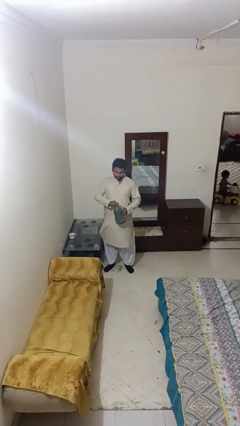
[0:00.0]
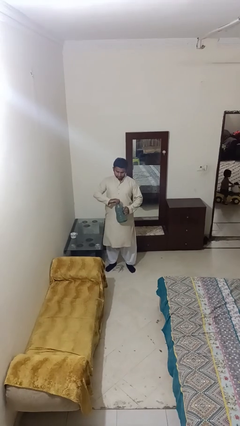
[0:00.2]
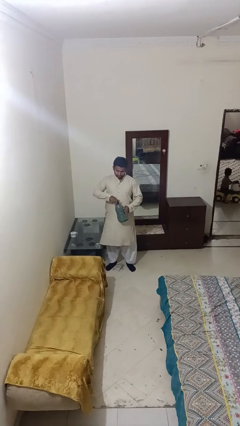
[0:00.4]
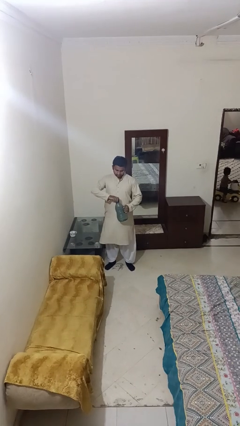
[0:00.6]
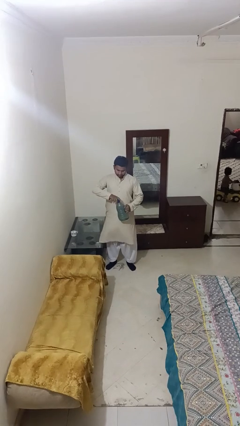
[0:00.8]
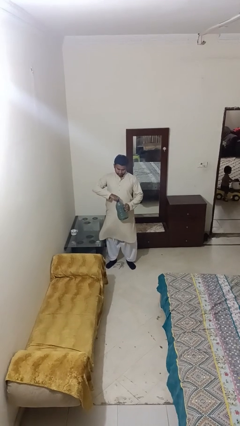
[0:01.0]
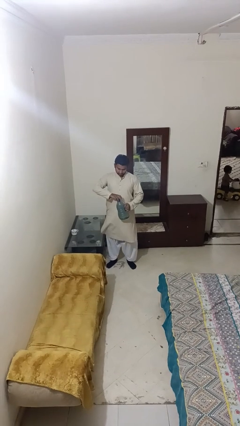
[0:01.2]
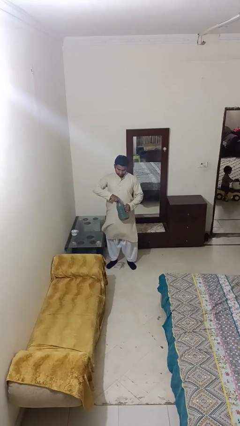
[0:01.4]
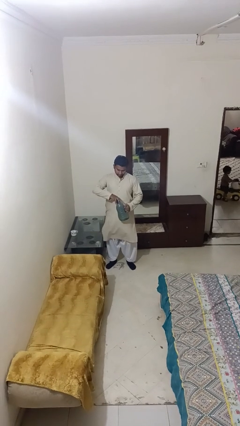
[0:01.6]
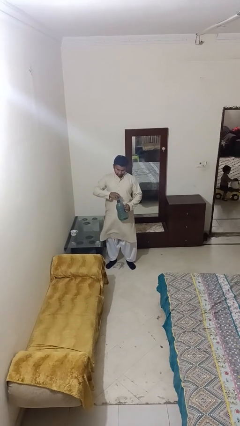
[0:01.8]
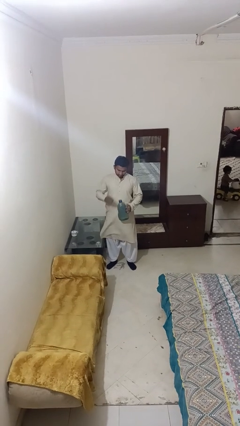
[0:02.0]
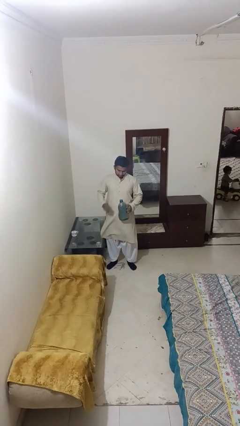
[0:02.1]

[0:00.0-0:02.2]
person unscrews lid from bottle

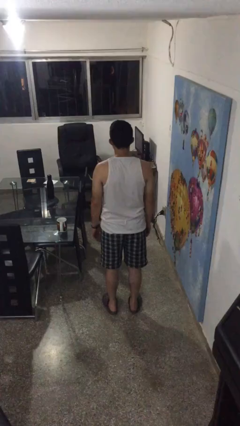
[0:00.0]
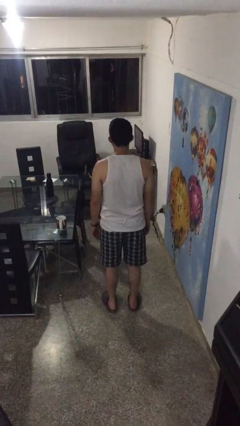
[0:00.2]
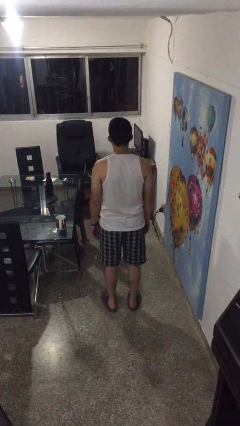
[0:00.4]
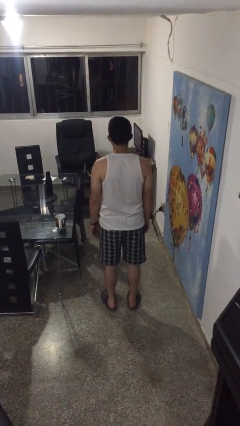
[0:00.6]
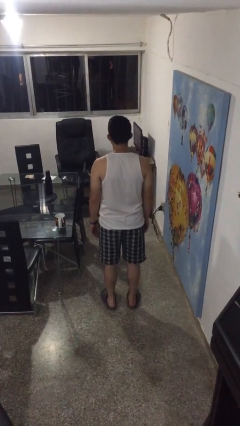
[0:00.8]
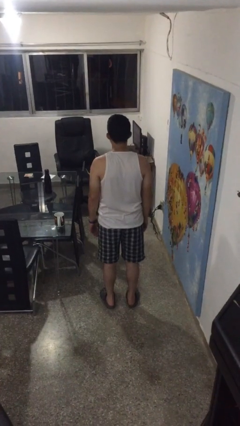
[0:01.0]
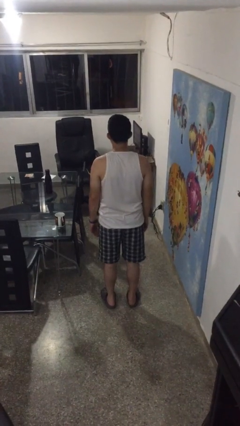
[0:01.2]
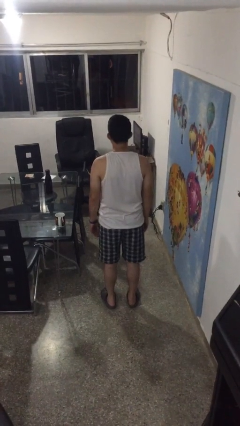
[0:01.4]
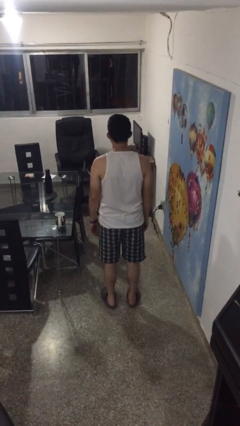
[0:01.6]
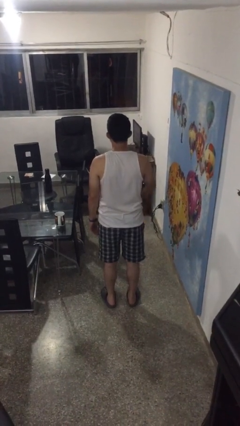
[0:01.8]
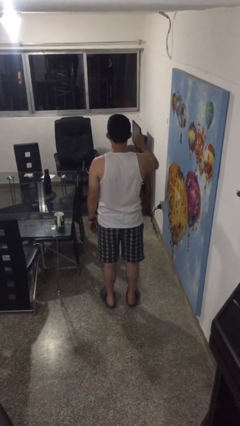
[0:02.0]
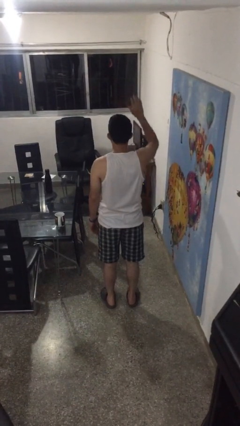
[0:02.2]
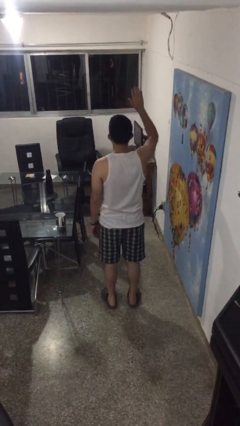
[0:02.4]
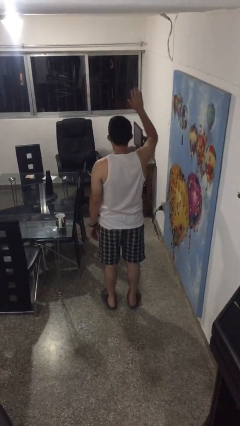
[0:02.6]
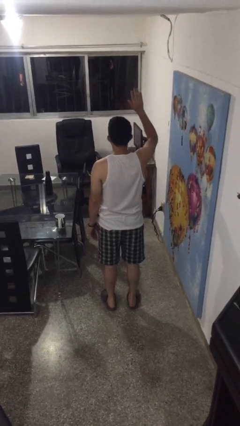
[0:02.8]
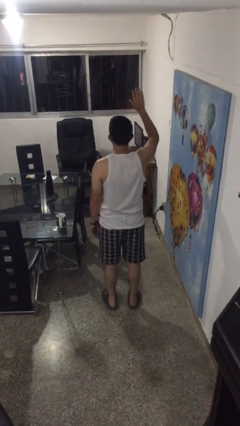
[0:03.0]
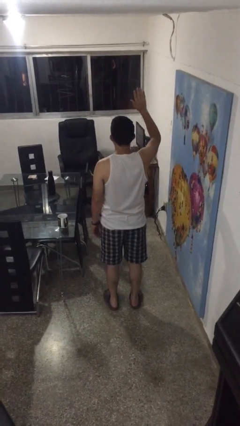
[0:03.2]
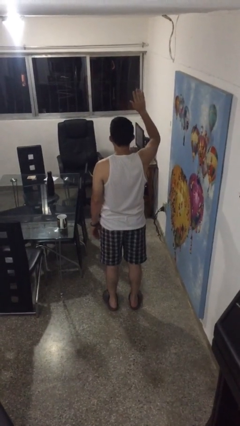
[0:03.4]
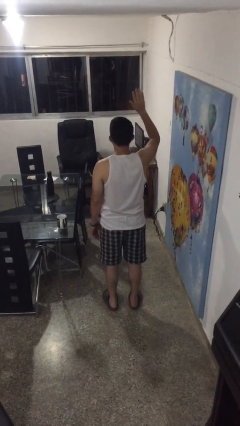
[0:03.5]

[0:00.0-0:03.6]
person gestures raise hand

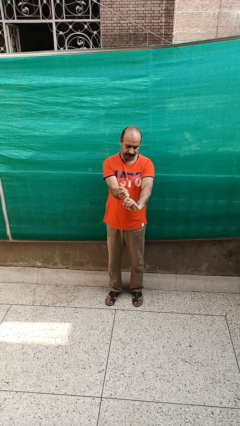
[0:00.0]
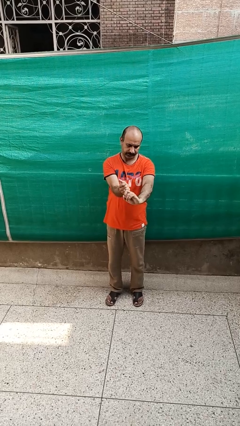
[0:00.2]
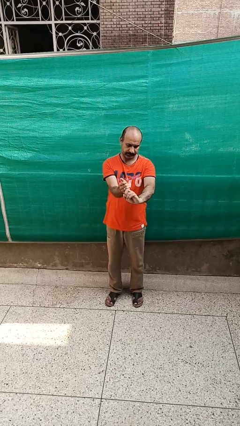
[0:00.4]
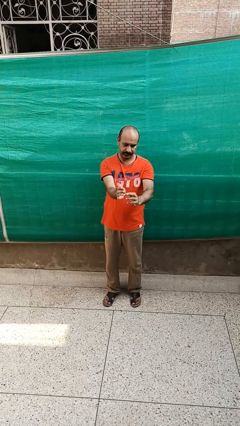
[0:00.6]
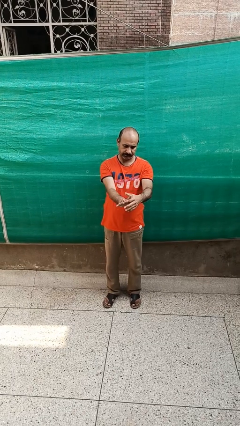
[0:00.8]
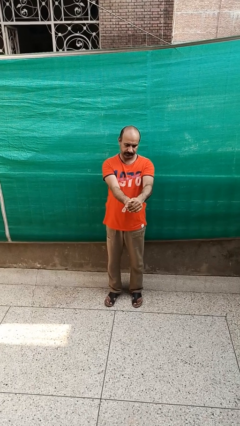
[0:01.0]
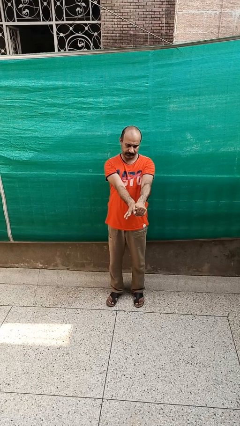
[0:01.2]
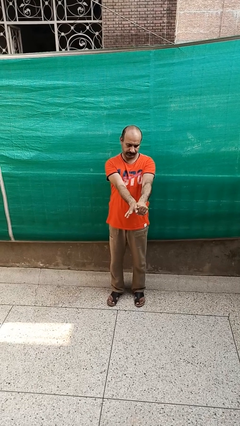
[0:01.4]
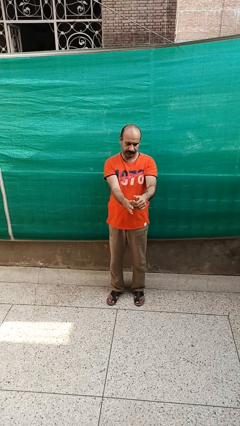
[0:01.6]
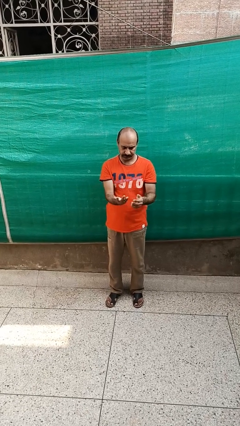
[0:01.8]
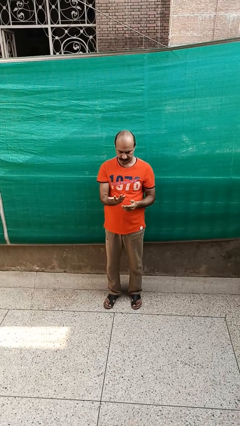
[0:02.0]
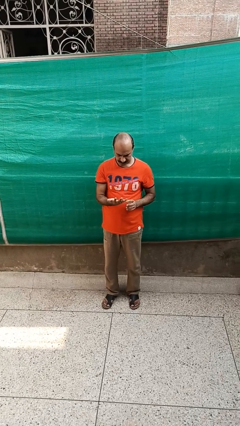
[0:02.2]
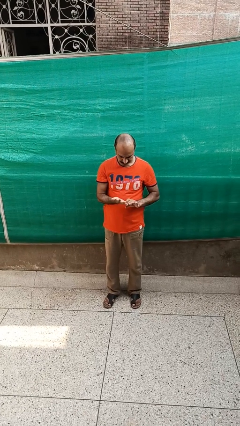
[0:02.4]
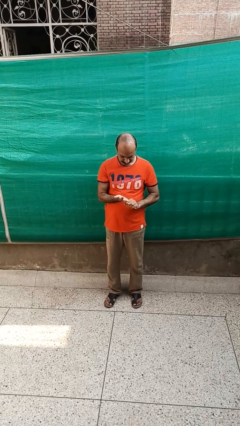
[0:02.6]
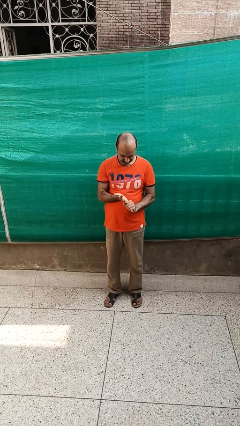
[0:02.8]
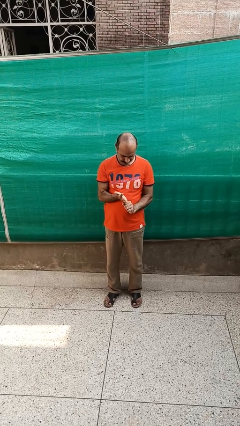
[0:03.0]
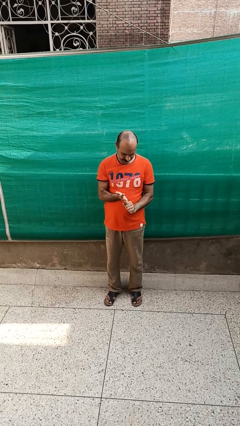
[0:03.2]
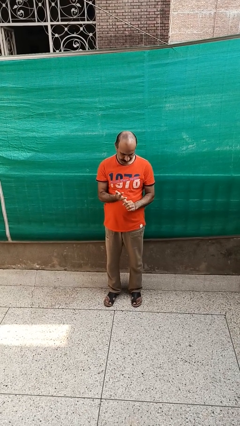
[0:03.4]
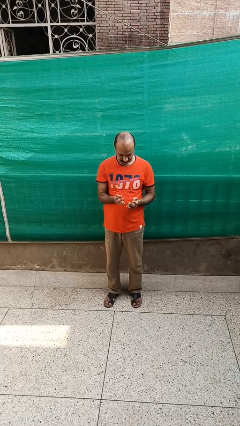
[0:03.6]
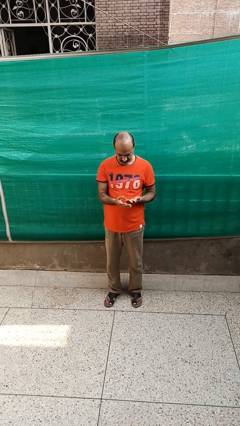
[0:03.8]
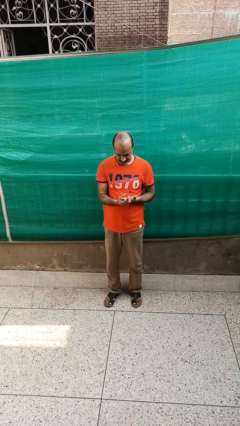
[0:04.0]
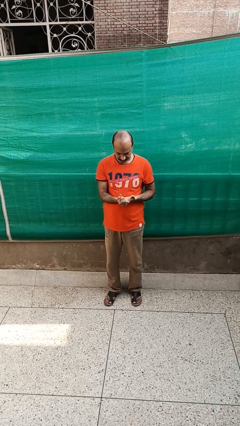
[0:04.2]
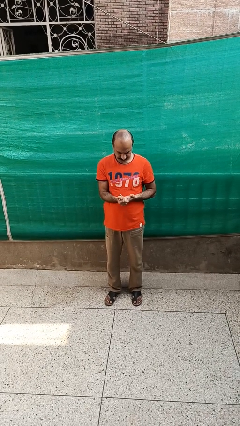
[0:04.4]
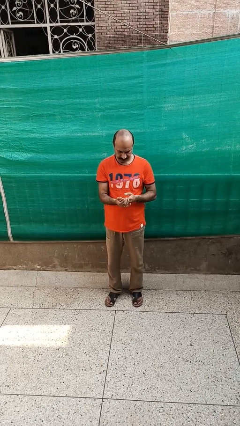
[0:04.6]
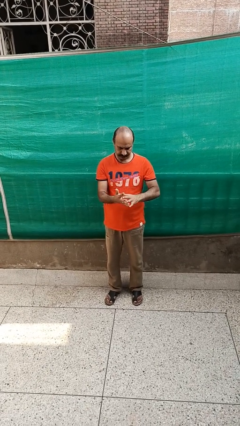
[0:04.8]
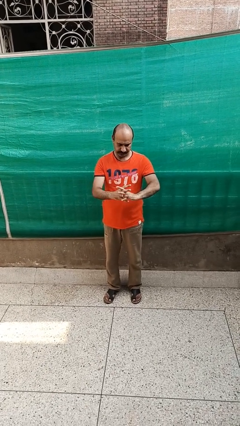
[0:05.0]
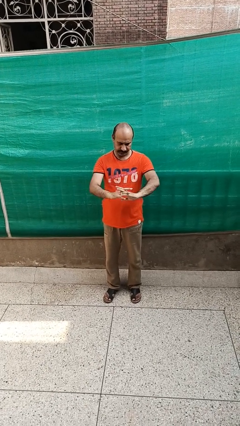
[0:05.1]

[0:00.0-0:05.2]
person cracks knuckles

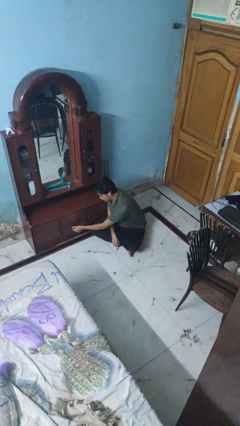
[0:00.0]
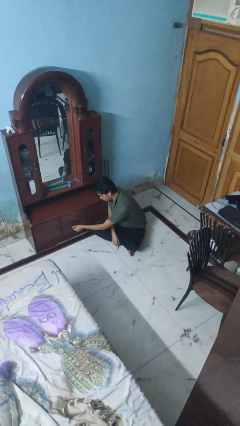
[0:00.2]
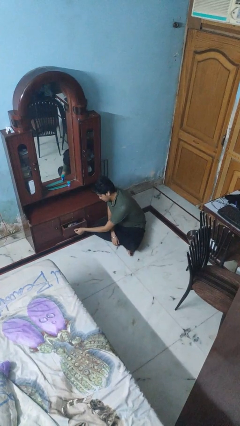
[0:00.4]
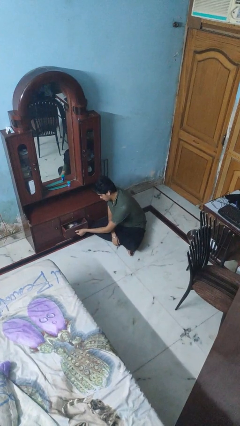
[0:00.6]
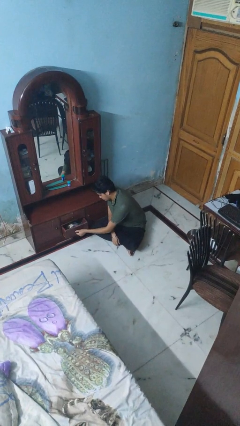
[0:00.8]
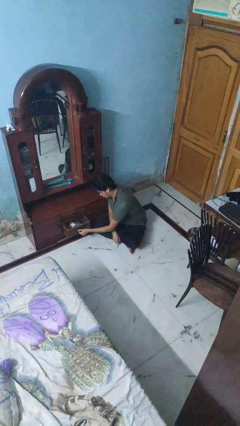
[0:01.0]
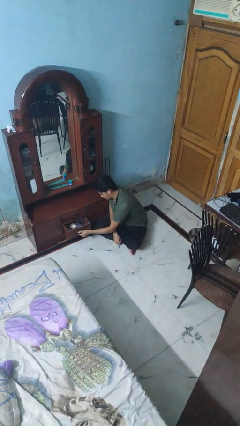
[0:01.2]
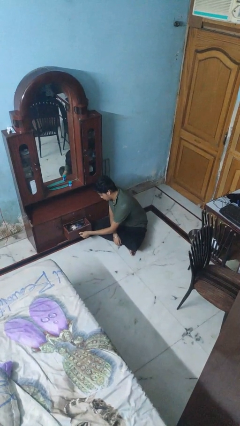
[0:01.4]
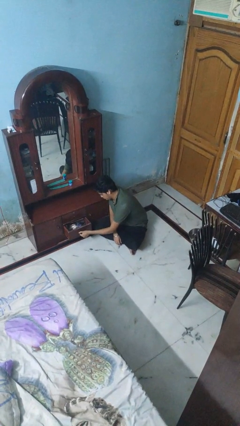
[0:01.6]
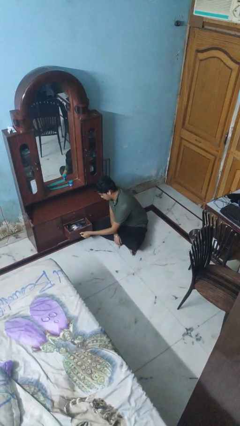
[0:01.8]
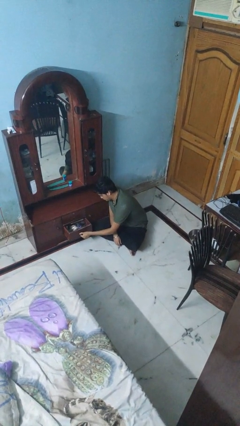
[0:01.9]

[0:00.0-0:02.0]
person opens dresser drawer

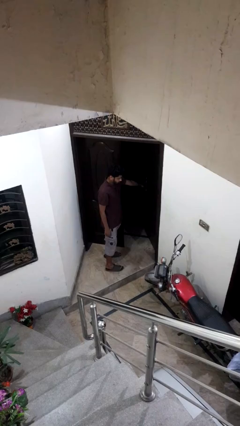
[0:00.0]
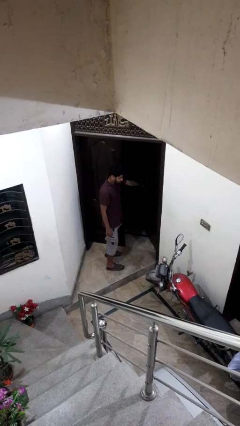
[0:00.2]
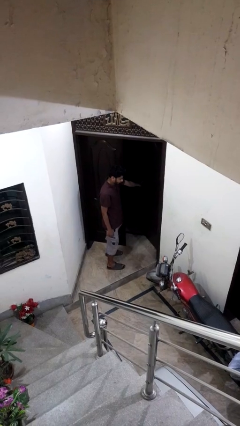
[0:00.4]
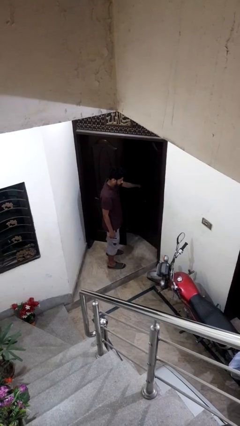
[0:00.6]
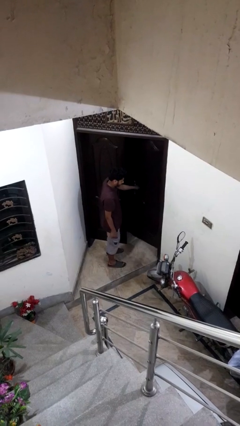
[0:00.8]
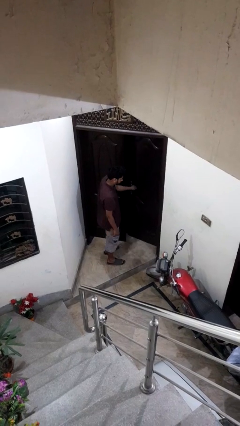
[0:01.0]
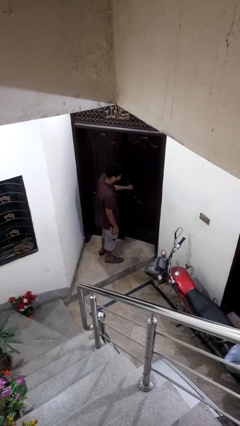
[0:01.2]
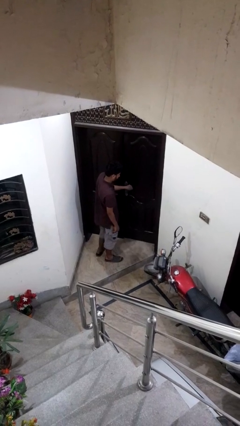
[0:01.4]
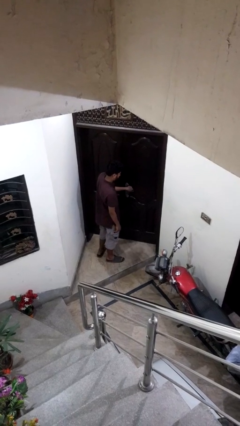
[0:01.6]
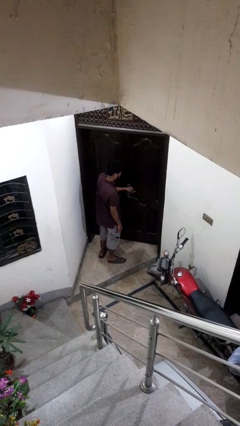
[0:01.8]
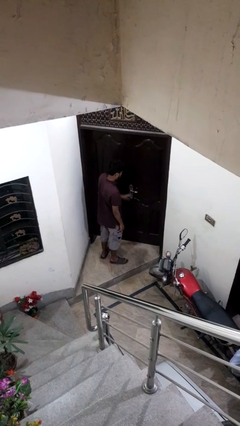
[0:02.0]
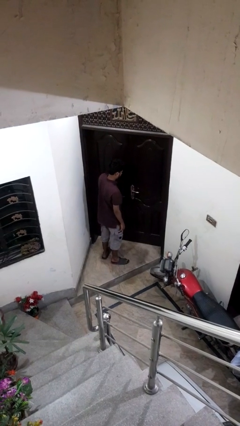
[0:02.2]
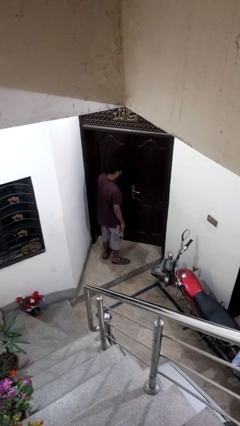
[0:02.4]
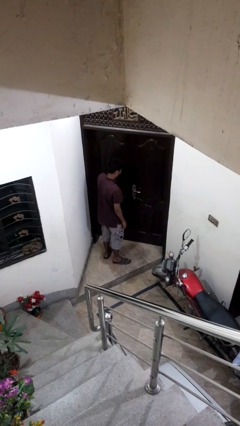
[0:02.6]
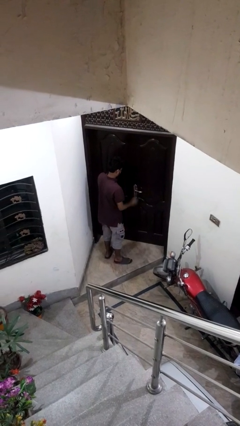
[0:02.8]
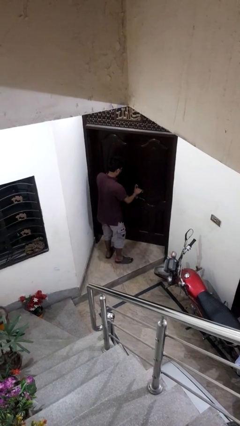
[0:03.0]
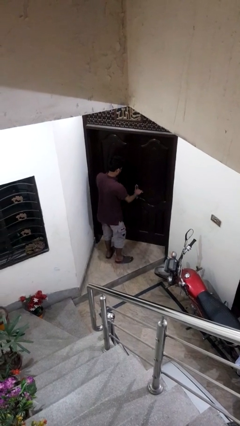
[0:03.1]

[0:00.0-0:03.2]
person closes facility door

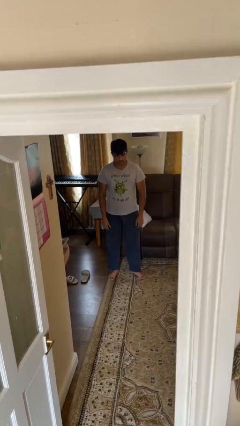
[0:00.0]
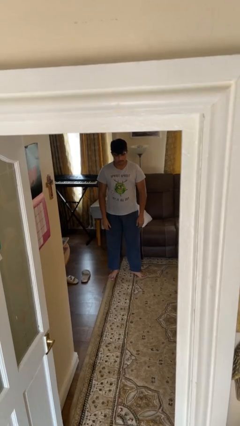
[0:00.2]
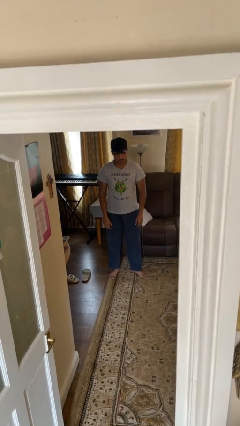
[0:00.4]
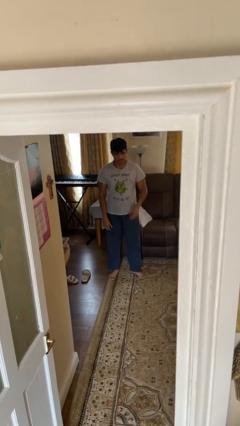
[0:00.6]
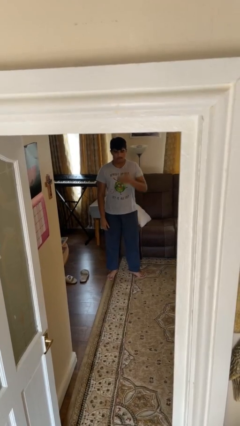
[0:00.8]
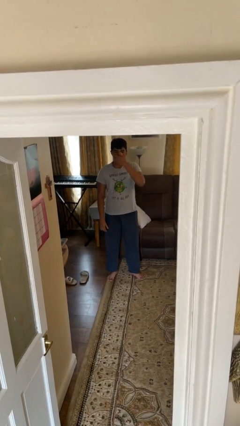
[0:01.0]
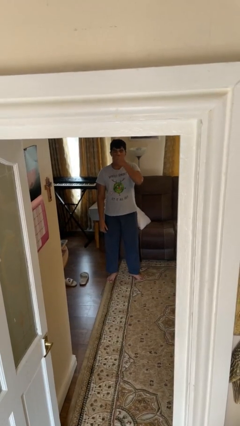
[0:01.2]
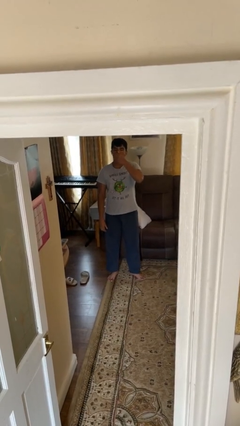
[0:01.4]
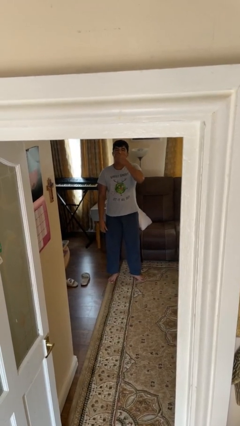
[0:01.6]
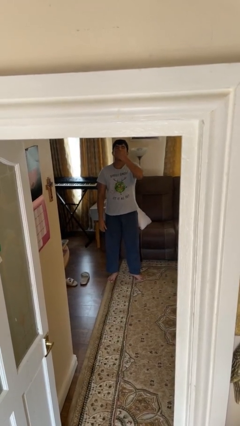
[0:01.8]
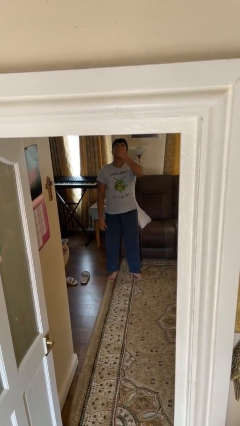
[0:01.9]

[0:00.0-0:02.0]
person yawns
